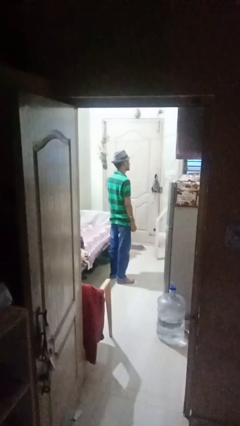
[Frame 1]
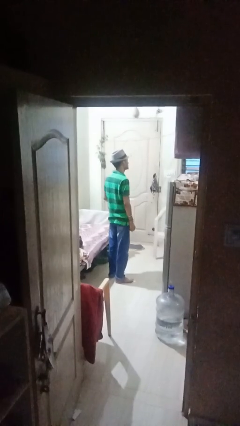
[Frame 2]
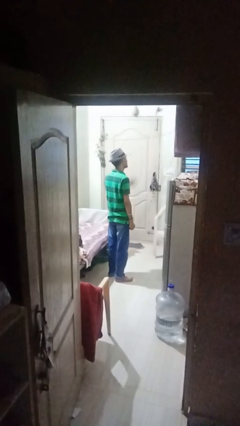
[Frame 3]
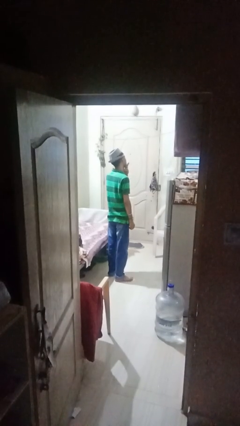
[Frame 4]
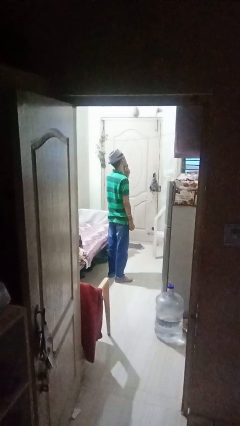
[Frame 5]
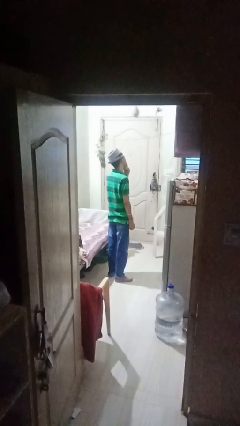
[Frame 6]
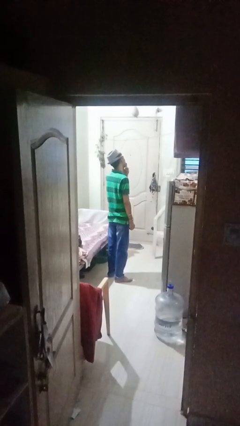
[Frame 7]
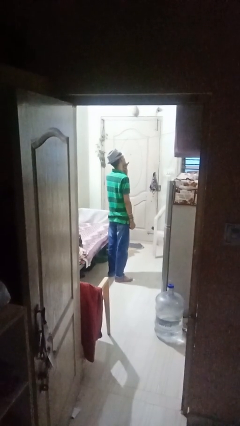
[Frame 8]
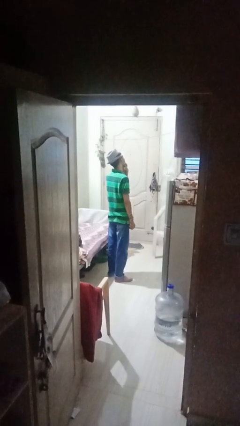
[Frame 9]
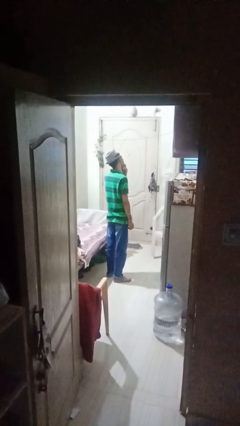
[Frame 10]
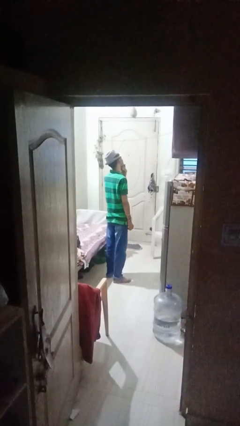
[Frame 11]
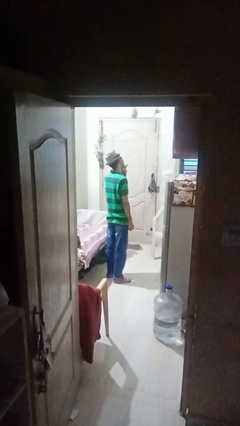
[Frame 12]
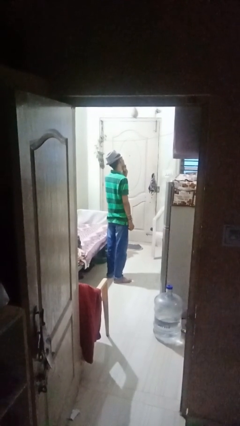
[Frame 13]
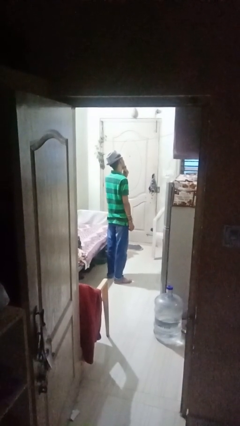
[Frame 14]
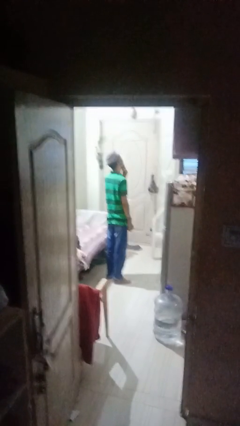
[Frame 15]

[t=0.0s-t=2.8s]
person strokes chin

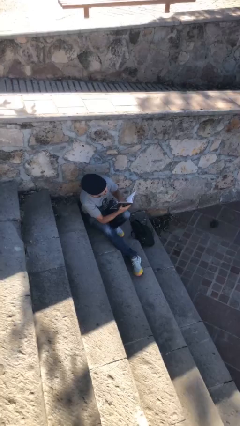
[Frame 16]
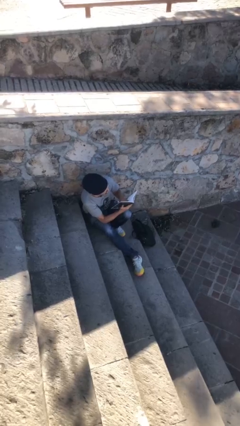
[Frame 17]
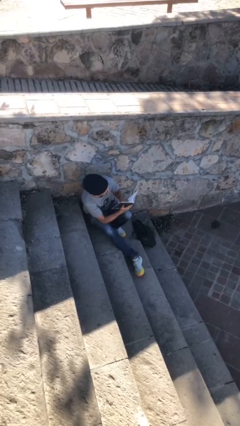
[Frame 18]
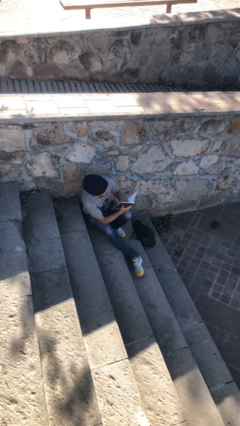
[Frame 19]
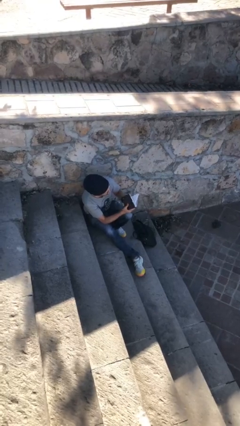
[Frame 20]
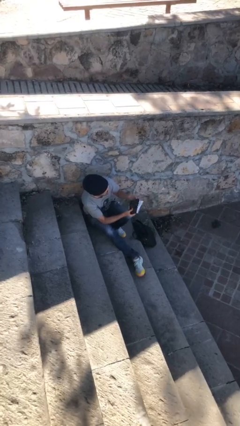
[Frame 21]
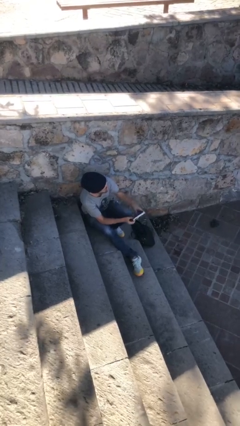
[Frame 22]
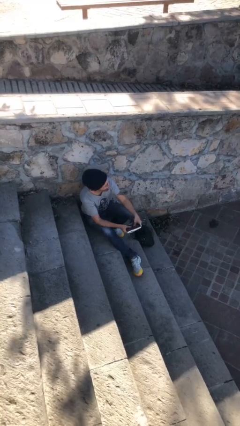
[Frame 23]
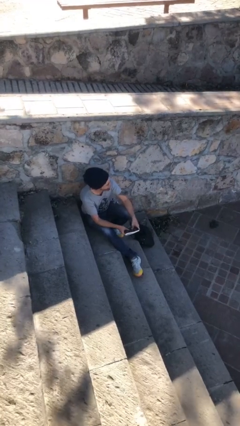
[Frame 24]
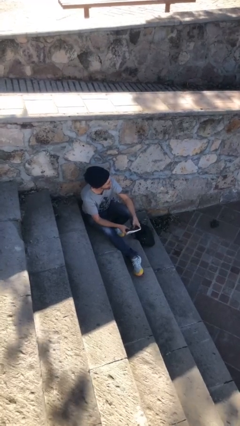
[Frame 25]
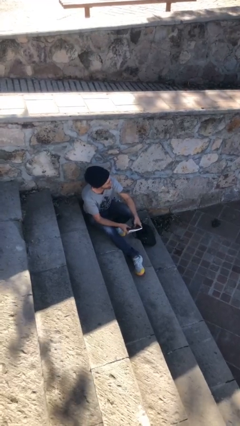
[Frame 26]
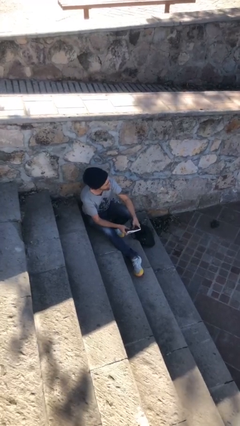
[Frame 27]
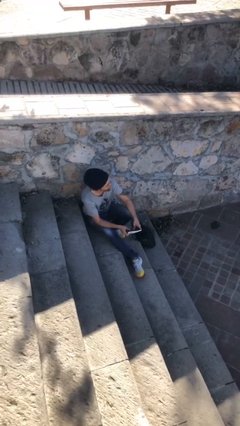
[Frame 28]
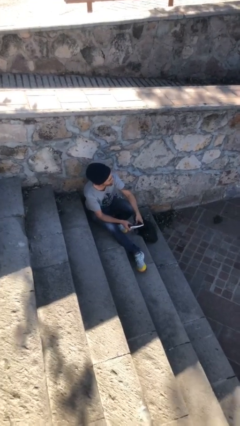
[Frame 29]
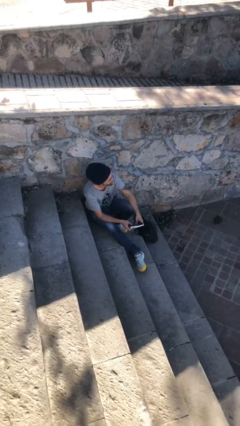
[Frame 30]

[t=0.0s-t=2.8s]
person reads document

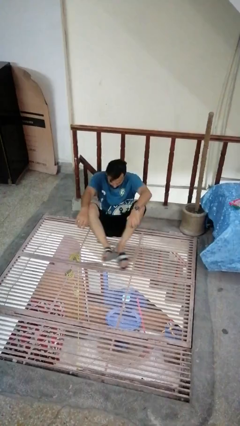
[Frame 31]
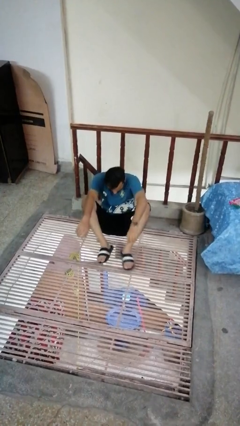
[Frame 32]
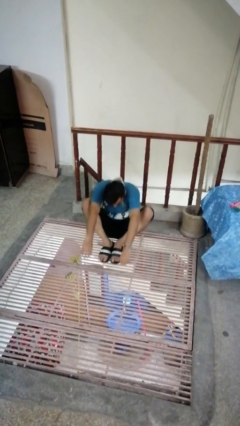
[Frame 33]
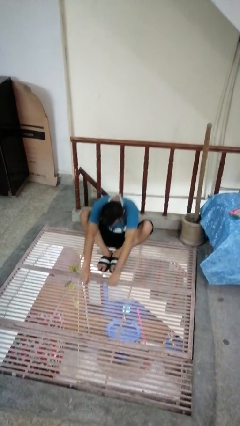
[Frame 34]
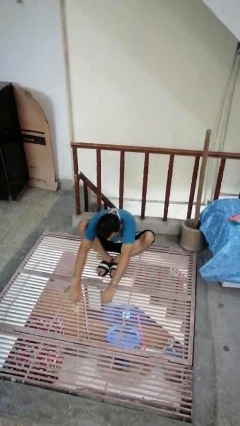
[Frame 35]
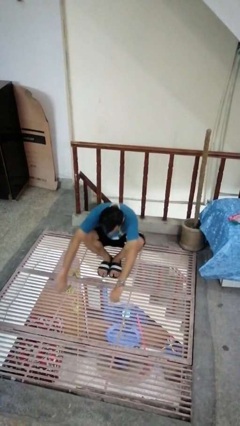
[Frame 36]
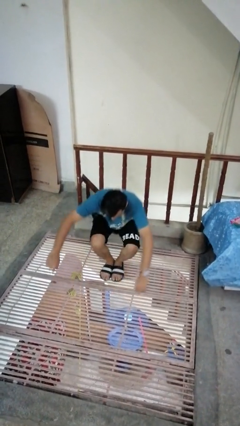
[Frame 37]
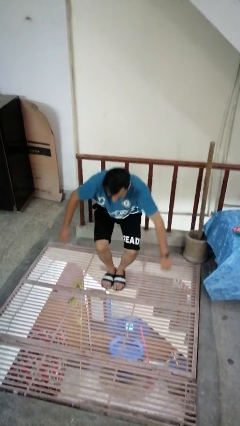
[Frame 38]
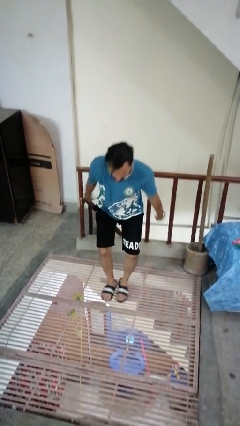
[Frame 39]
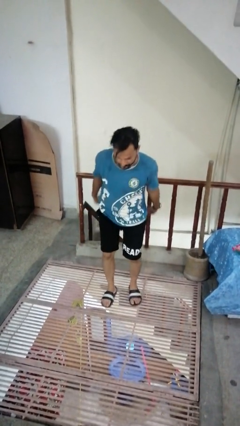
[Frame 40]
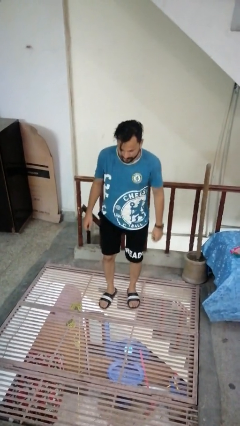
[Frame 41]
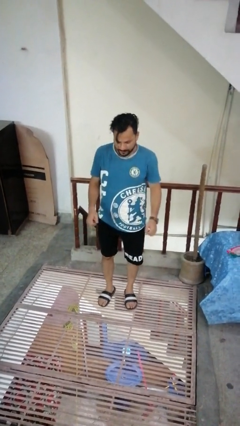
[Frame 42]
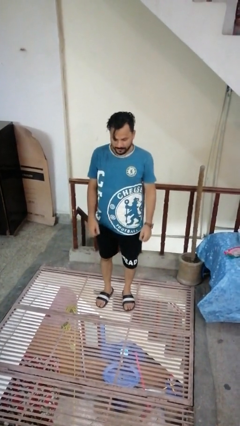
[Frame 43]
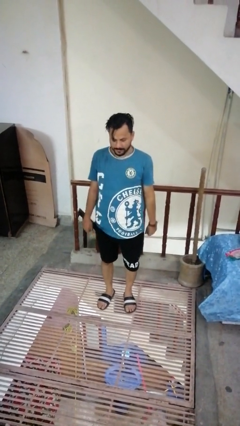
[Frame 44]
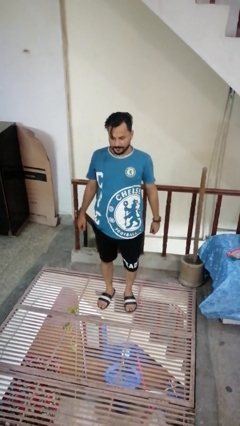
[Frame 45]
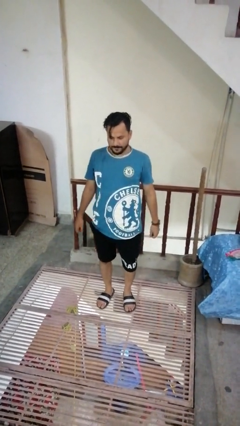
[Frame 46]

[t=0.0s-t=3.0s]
person stands up from floor

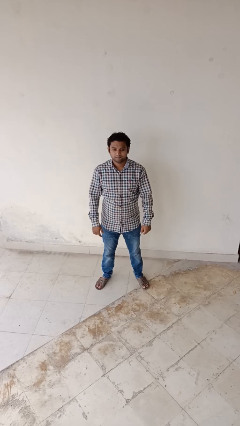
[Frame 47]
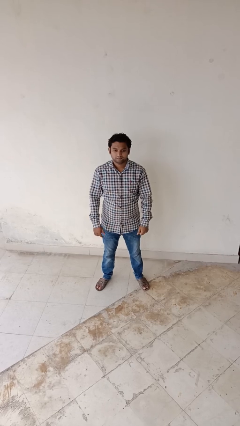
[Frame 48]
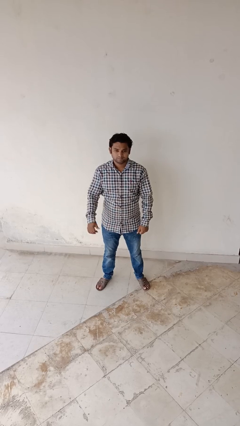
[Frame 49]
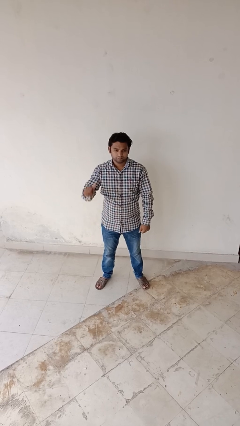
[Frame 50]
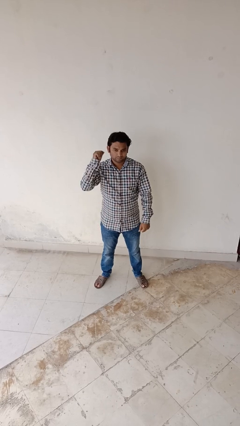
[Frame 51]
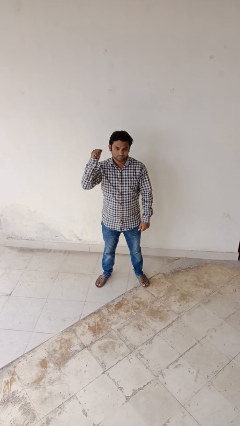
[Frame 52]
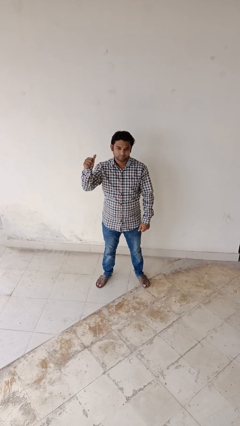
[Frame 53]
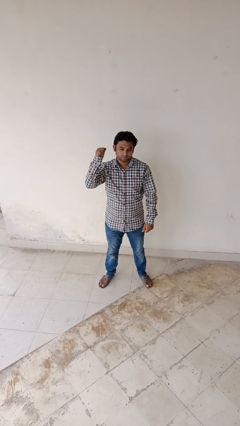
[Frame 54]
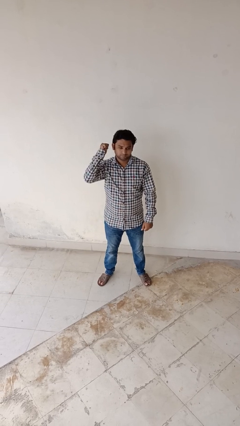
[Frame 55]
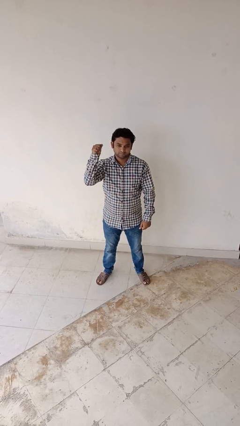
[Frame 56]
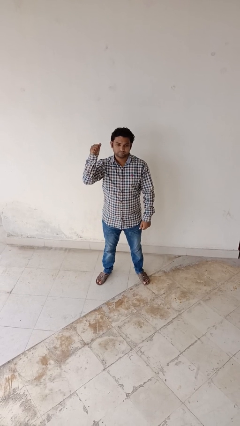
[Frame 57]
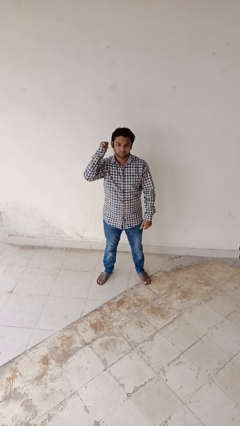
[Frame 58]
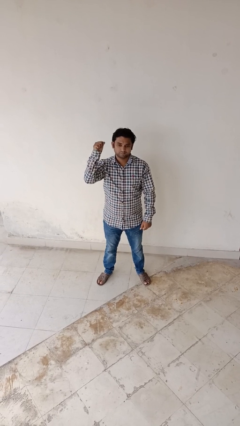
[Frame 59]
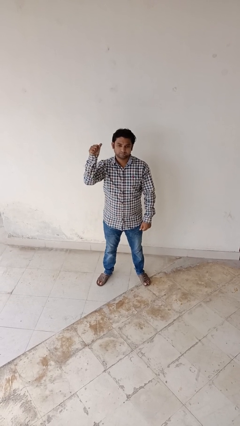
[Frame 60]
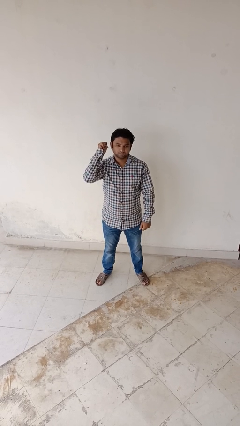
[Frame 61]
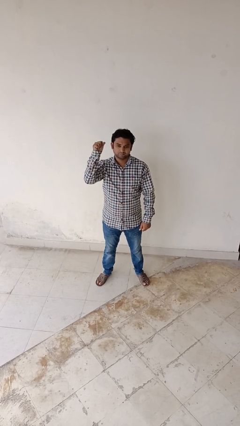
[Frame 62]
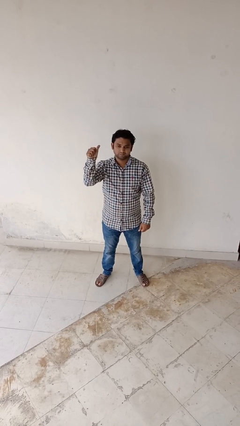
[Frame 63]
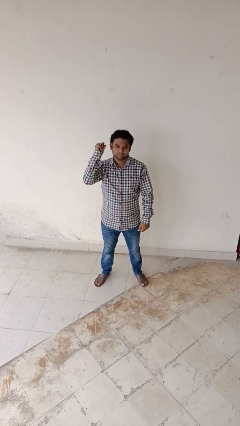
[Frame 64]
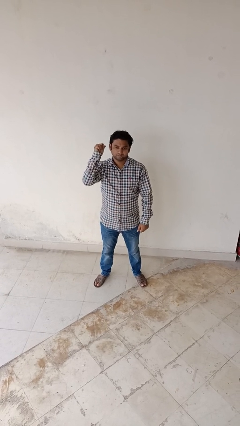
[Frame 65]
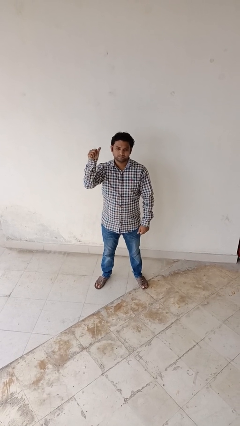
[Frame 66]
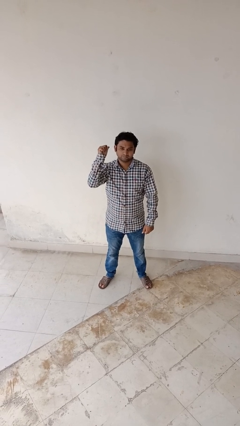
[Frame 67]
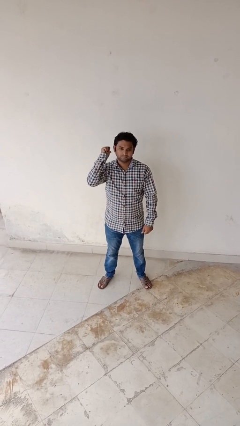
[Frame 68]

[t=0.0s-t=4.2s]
person gestures behind me

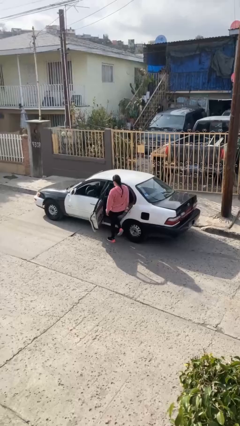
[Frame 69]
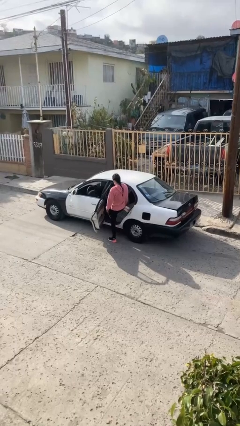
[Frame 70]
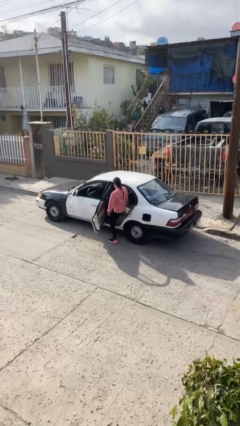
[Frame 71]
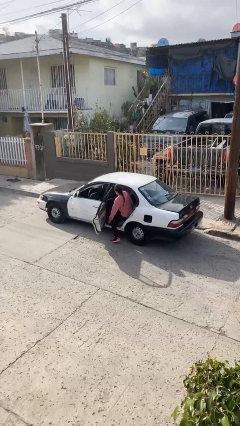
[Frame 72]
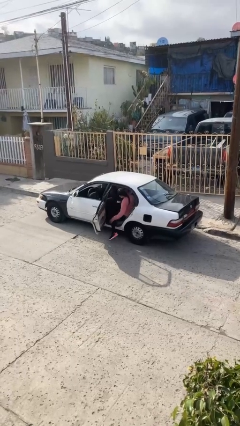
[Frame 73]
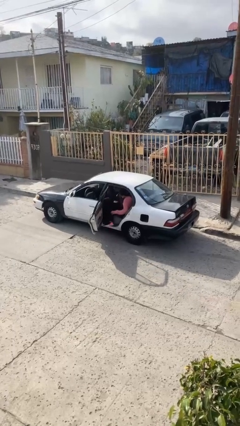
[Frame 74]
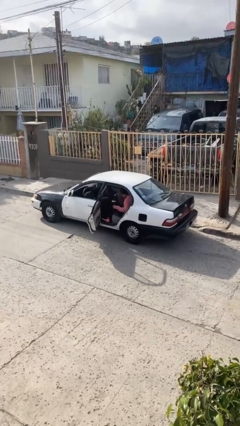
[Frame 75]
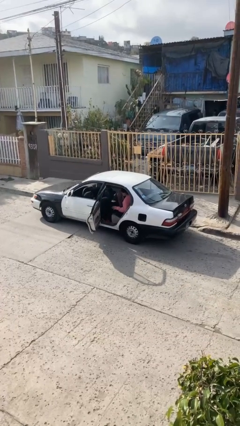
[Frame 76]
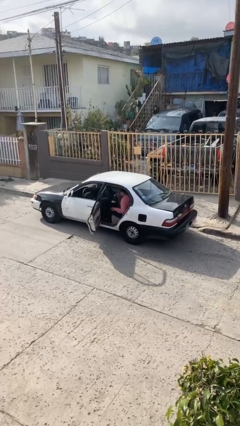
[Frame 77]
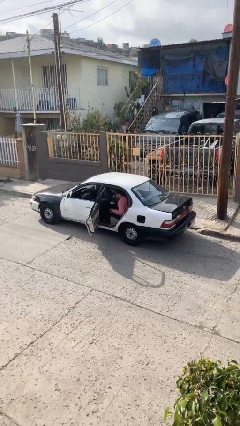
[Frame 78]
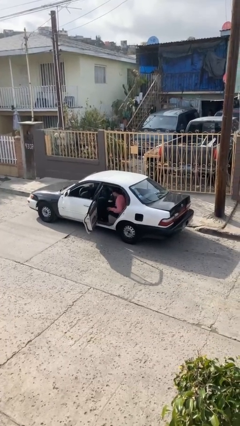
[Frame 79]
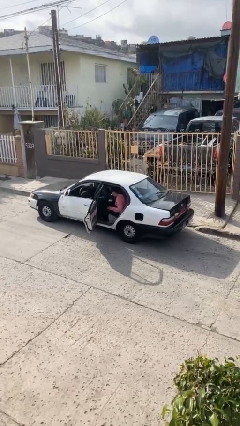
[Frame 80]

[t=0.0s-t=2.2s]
person enters car

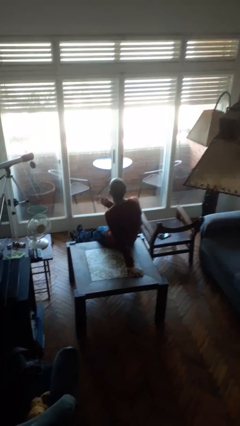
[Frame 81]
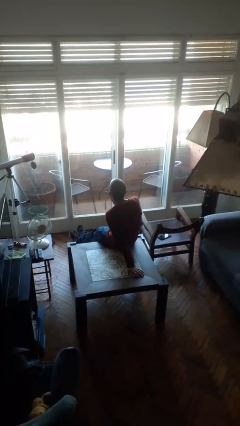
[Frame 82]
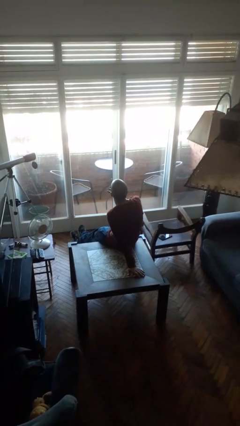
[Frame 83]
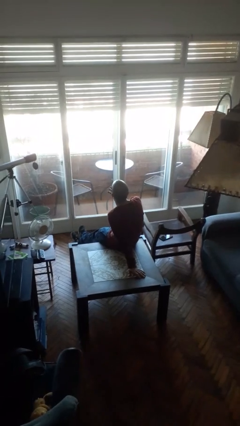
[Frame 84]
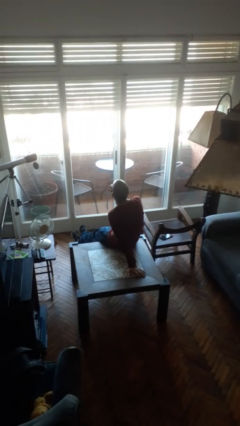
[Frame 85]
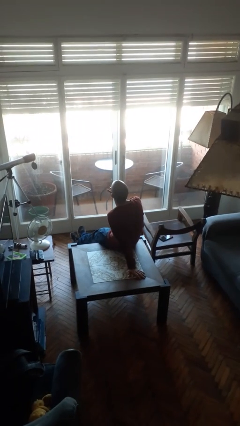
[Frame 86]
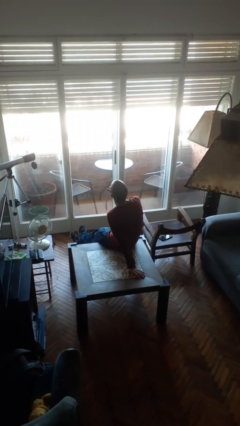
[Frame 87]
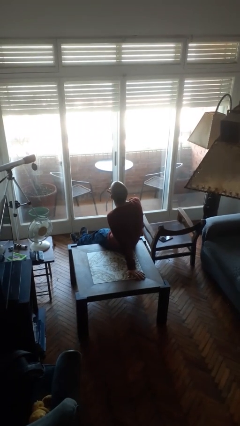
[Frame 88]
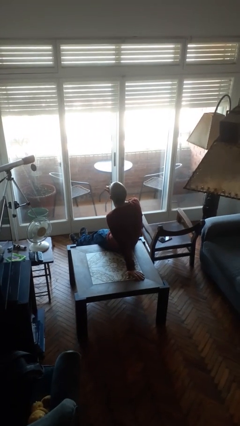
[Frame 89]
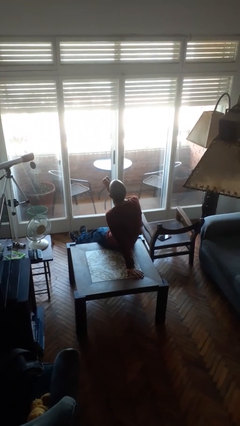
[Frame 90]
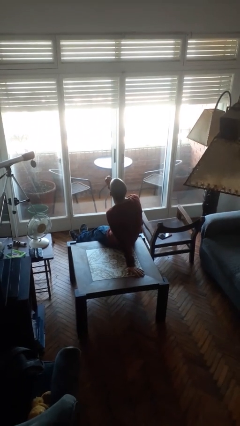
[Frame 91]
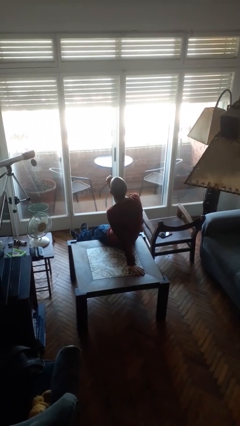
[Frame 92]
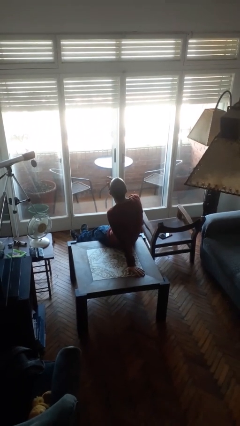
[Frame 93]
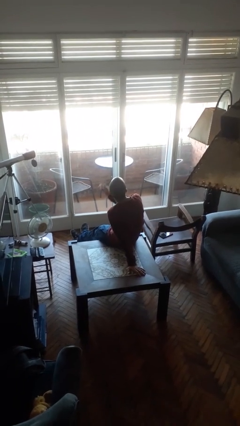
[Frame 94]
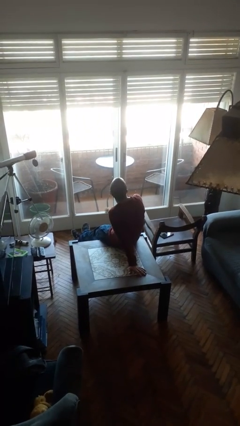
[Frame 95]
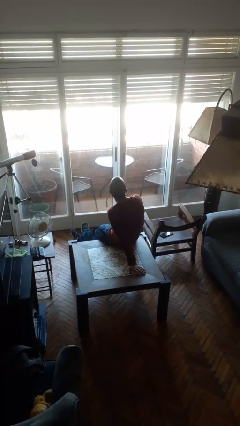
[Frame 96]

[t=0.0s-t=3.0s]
person licks fingers
